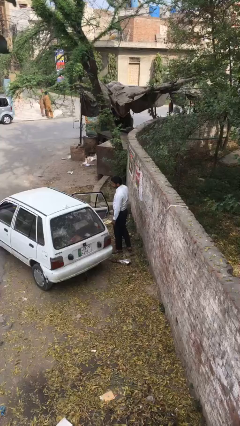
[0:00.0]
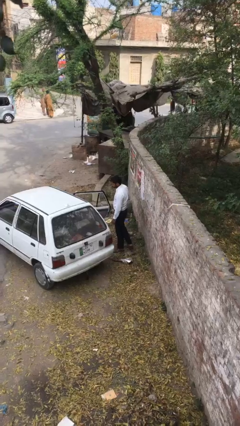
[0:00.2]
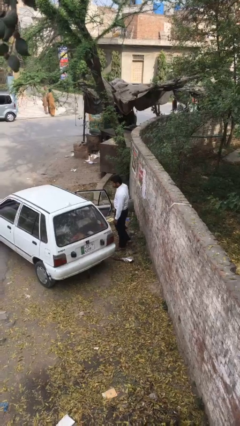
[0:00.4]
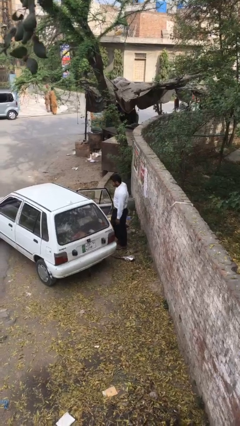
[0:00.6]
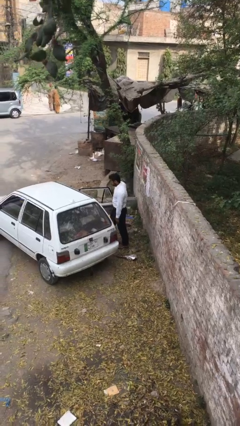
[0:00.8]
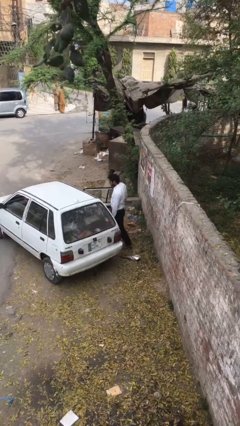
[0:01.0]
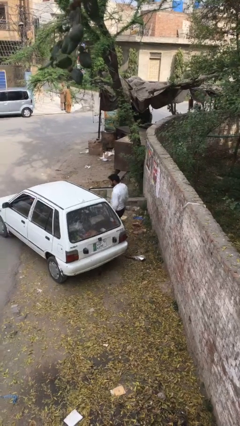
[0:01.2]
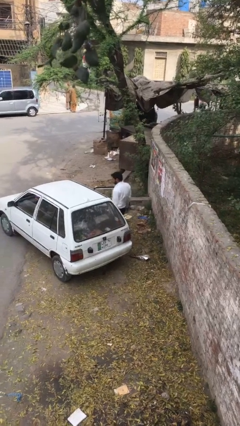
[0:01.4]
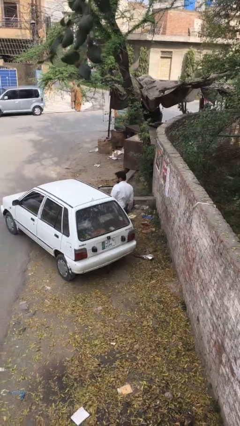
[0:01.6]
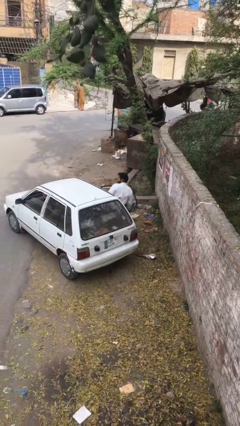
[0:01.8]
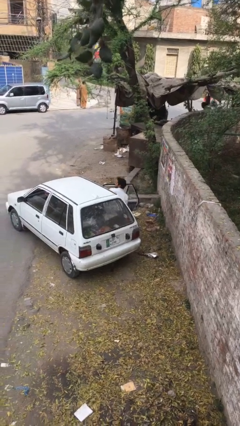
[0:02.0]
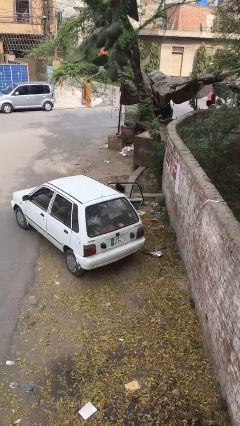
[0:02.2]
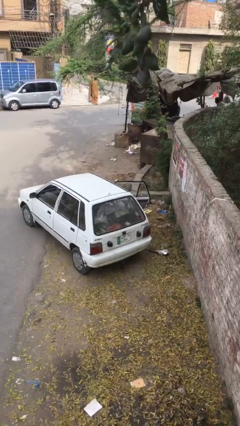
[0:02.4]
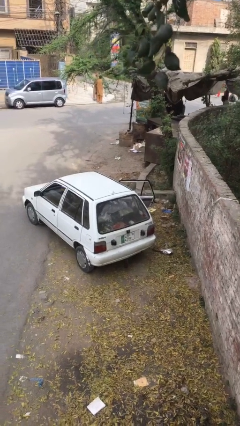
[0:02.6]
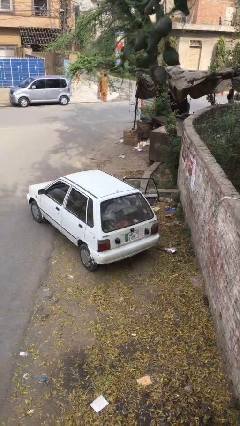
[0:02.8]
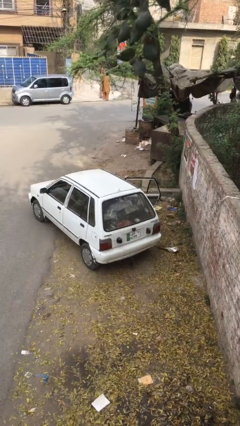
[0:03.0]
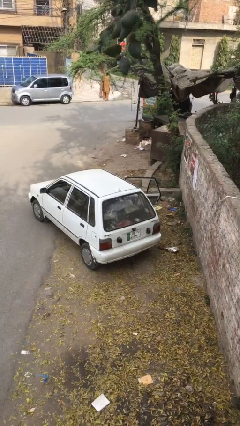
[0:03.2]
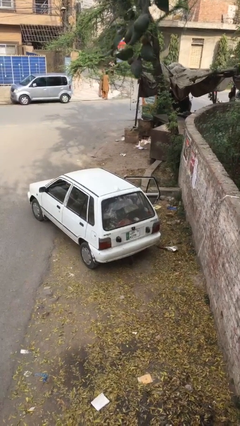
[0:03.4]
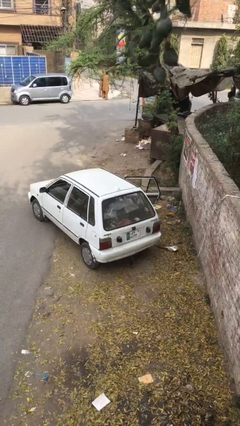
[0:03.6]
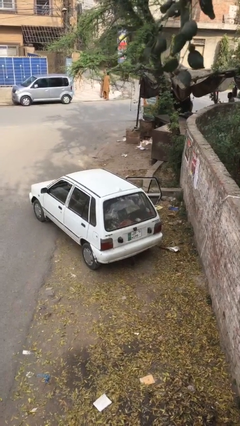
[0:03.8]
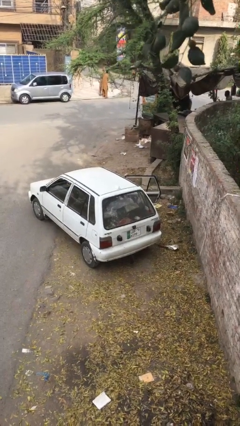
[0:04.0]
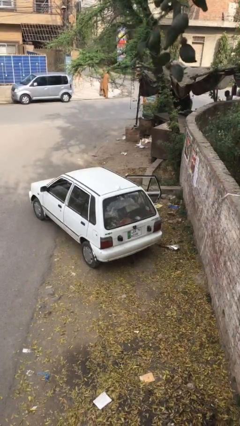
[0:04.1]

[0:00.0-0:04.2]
person enters car

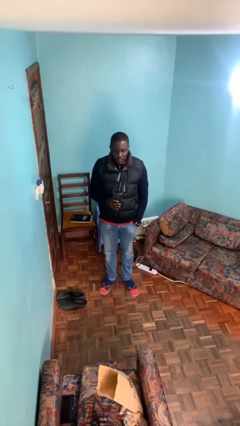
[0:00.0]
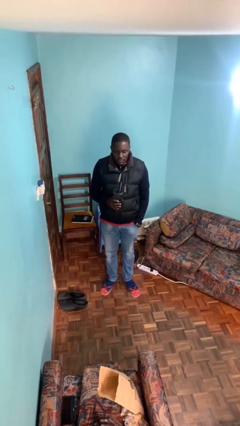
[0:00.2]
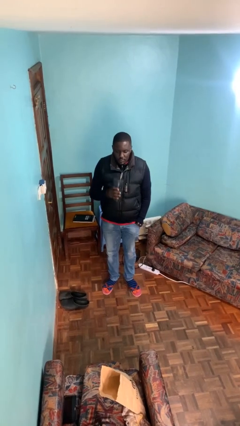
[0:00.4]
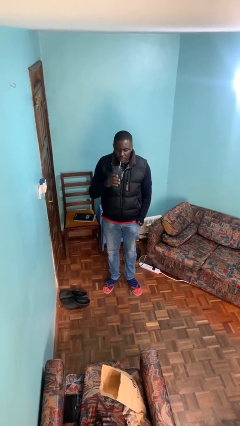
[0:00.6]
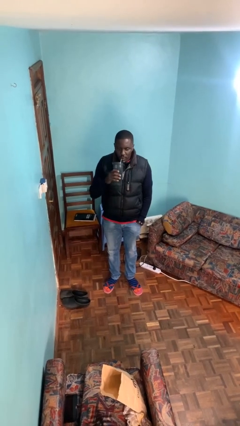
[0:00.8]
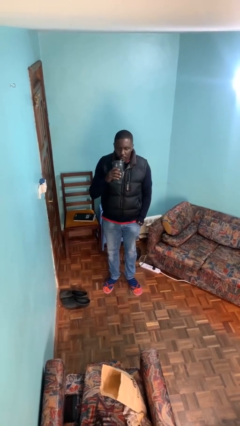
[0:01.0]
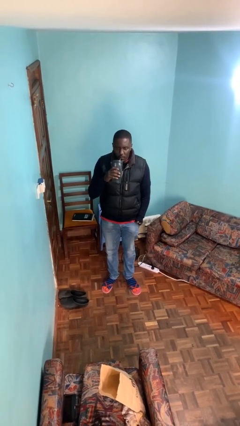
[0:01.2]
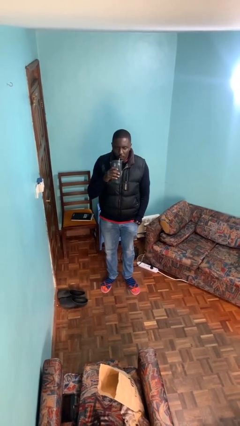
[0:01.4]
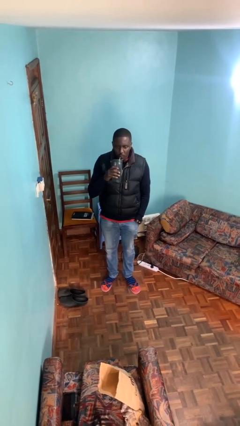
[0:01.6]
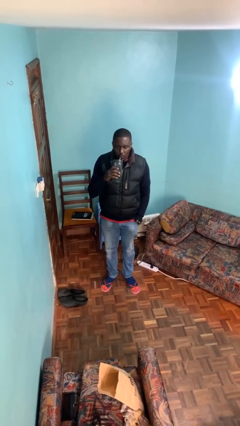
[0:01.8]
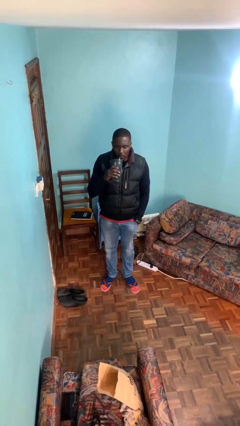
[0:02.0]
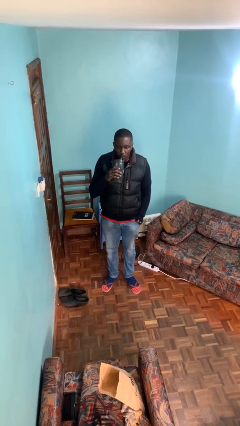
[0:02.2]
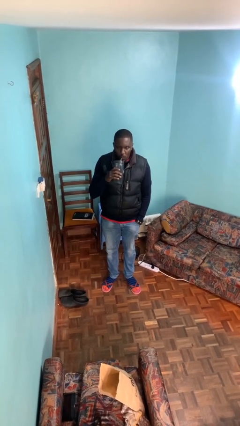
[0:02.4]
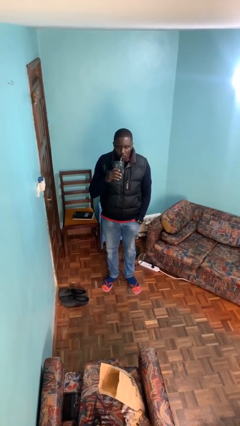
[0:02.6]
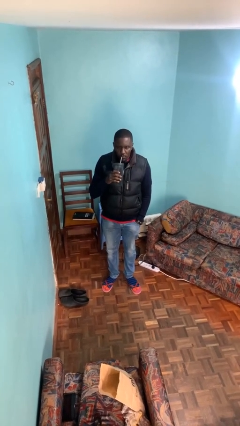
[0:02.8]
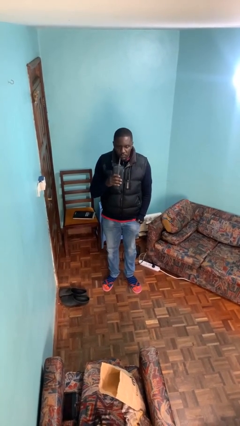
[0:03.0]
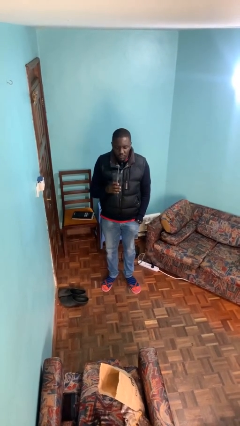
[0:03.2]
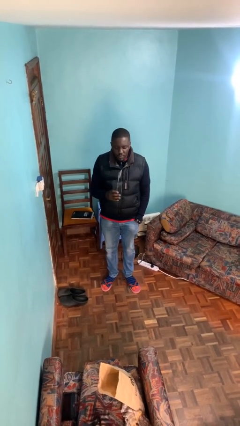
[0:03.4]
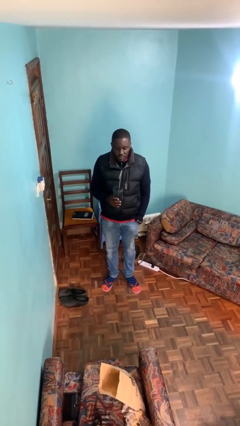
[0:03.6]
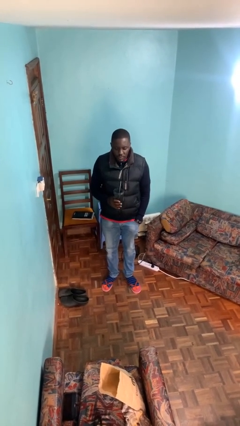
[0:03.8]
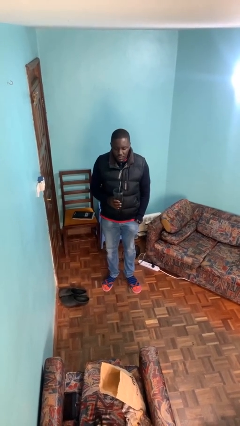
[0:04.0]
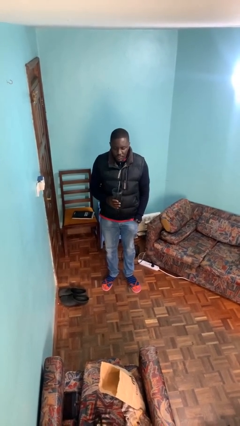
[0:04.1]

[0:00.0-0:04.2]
person drinks from straw

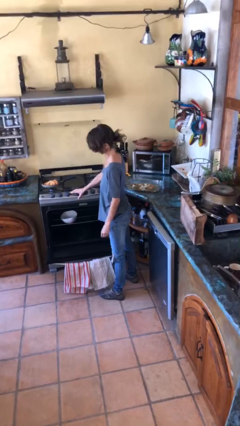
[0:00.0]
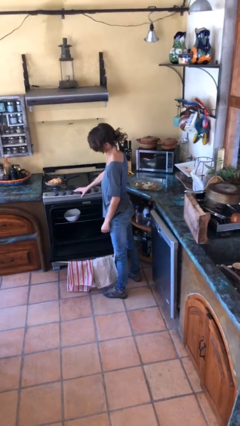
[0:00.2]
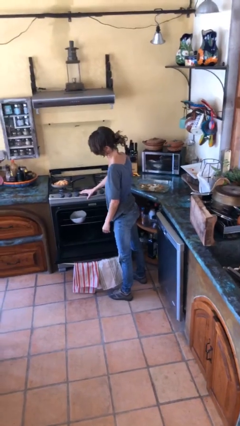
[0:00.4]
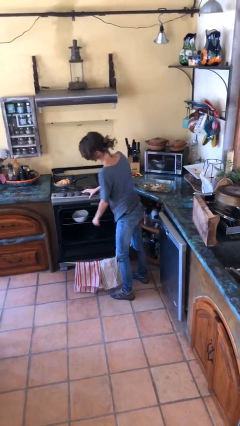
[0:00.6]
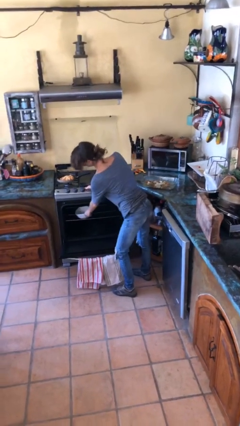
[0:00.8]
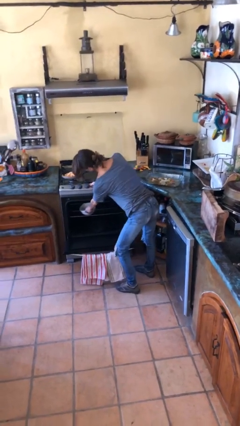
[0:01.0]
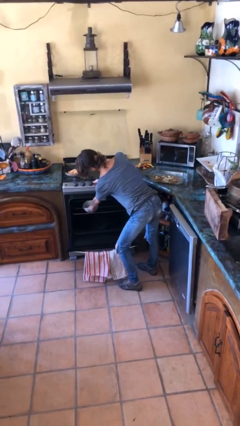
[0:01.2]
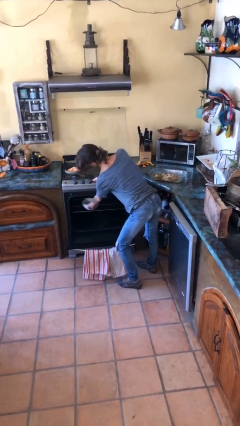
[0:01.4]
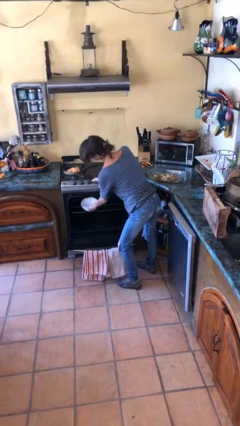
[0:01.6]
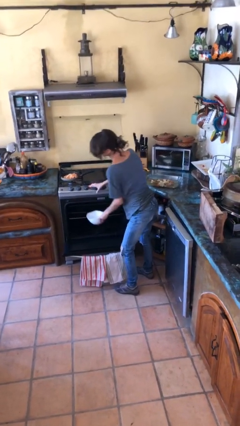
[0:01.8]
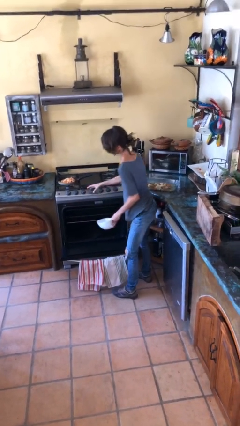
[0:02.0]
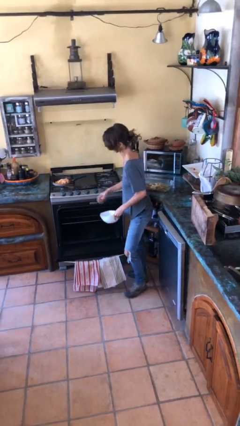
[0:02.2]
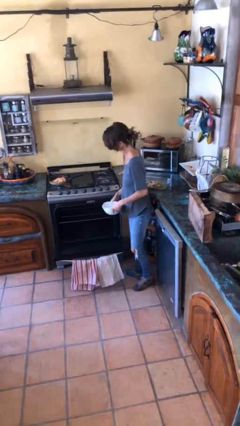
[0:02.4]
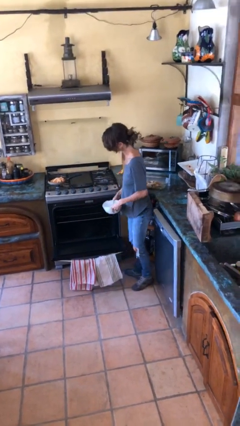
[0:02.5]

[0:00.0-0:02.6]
person takes object from oven

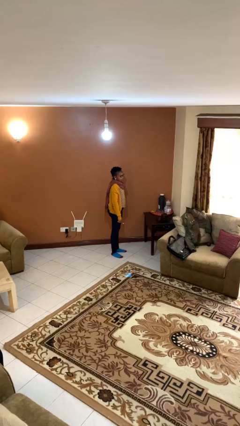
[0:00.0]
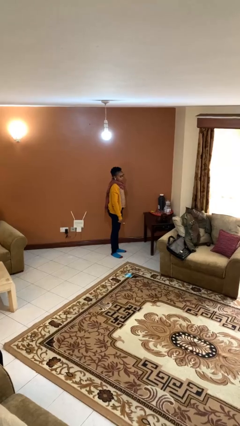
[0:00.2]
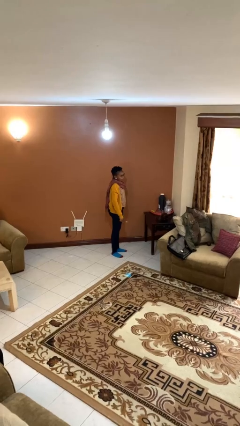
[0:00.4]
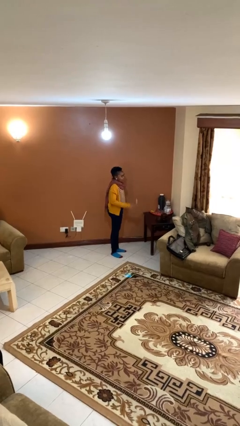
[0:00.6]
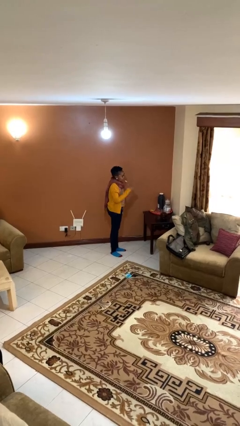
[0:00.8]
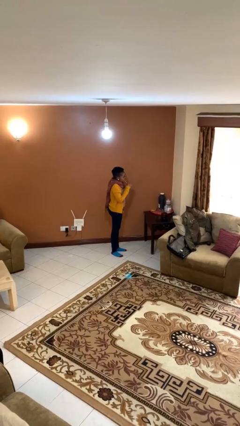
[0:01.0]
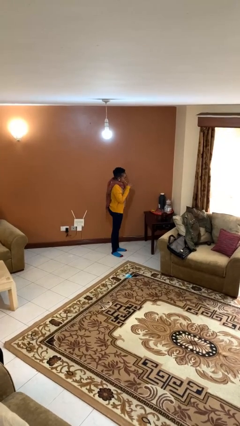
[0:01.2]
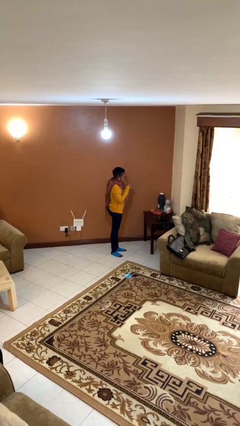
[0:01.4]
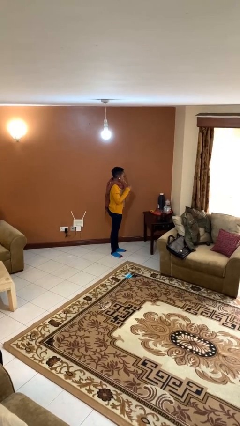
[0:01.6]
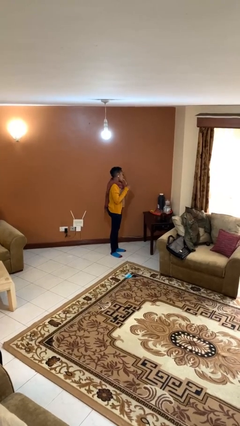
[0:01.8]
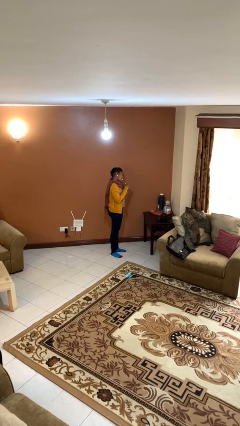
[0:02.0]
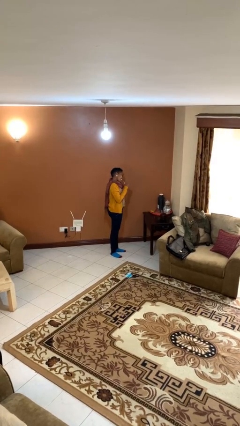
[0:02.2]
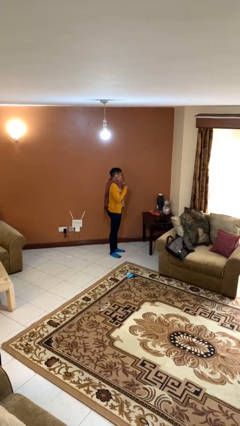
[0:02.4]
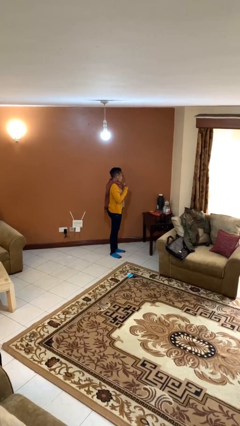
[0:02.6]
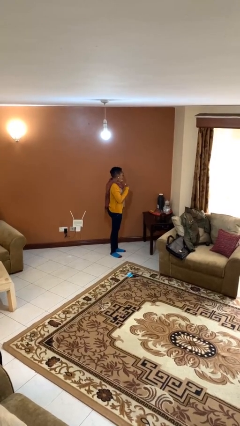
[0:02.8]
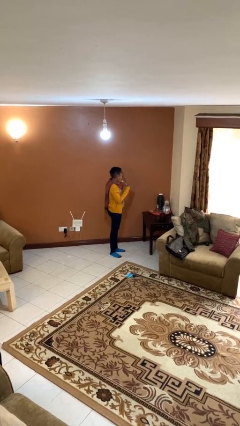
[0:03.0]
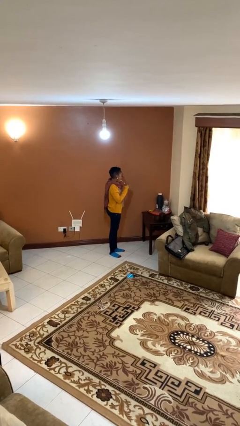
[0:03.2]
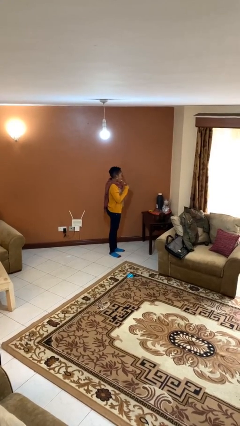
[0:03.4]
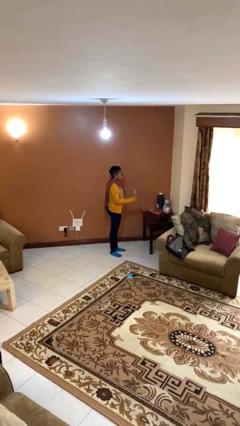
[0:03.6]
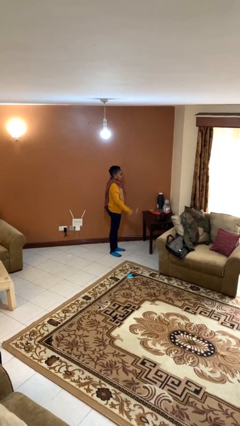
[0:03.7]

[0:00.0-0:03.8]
person brushes teeth

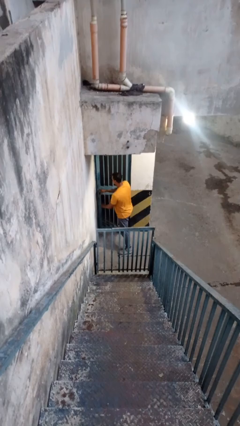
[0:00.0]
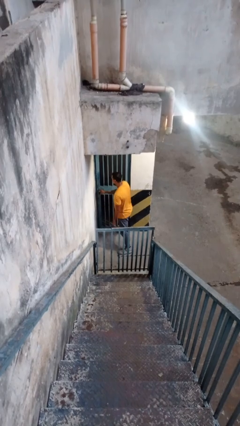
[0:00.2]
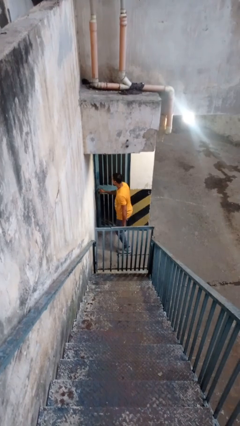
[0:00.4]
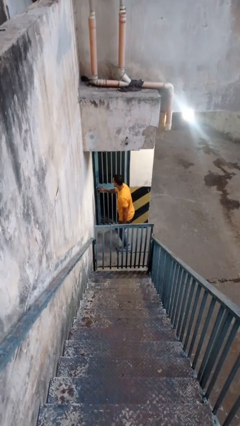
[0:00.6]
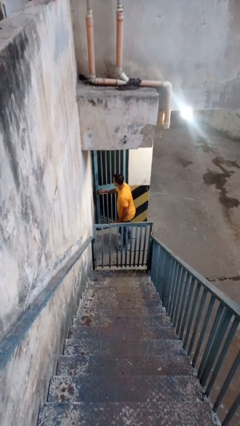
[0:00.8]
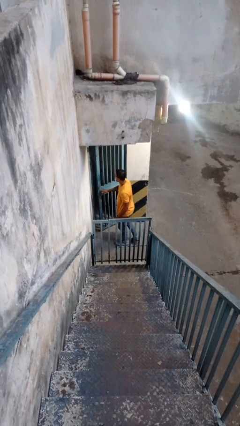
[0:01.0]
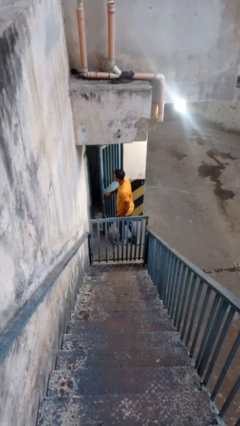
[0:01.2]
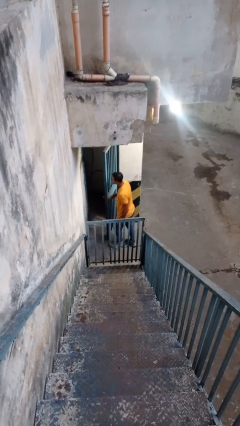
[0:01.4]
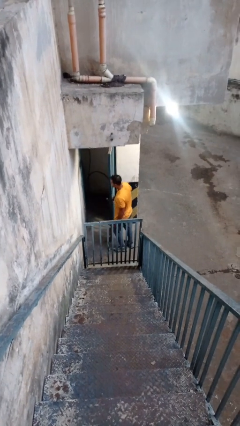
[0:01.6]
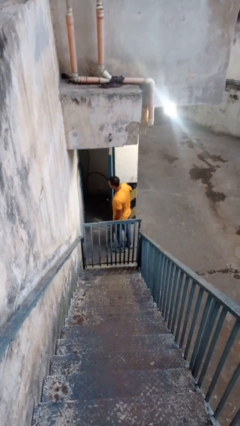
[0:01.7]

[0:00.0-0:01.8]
person opens facility door

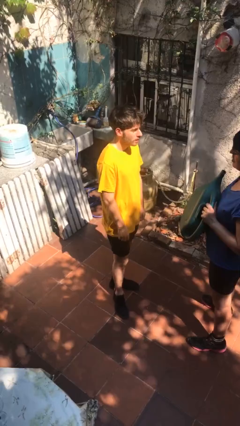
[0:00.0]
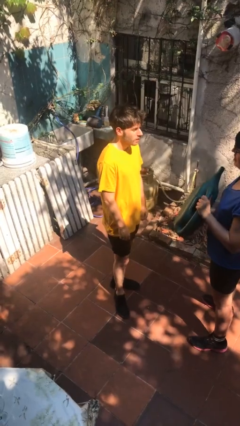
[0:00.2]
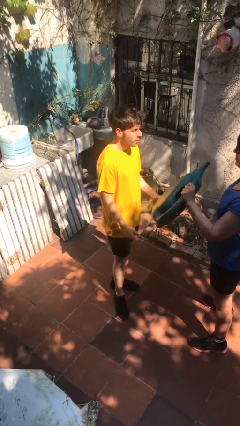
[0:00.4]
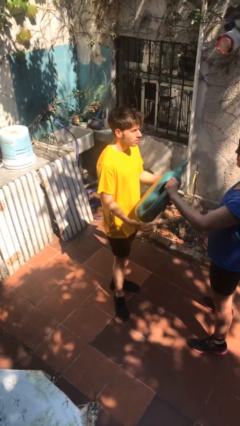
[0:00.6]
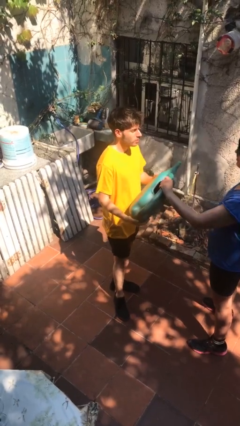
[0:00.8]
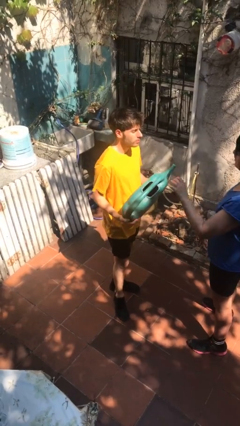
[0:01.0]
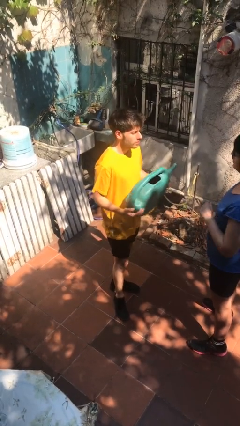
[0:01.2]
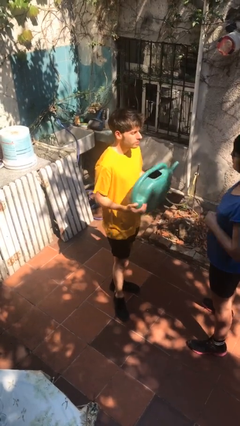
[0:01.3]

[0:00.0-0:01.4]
person transfers object to person
